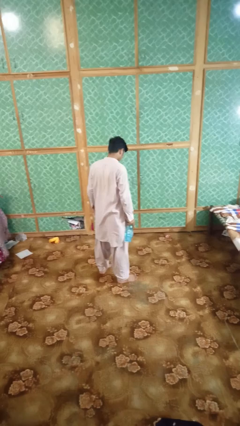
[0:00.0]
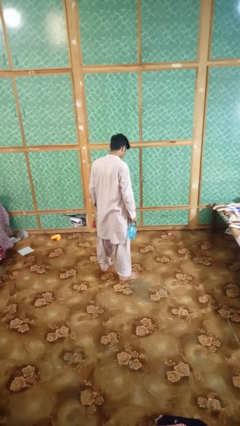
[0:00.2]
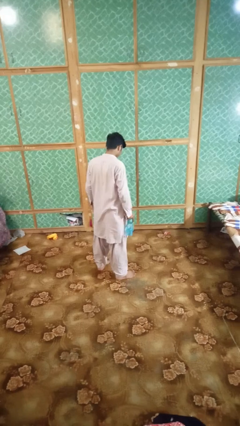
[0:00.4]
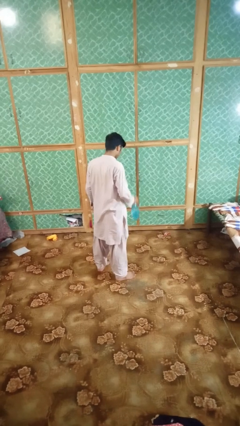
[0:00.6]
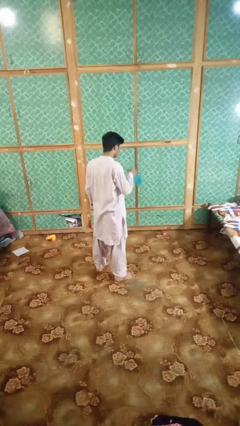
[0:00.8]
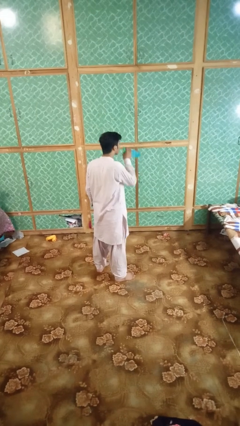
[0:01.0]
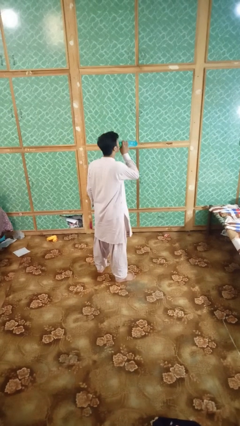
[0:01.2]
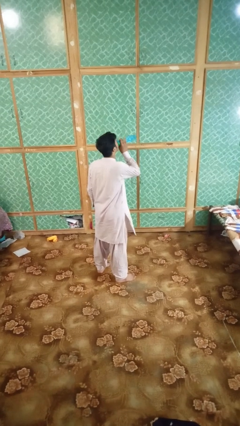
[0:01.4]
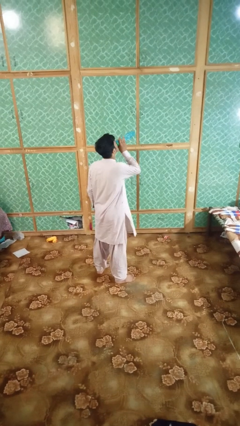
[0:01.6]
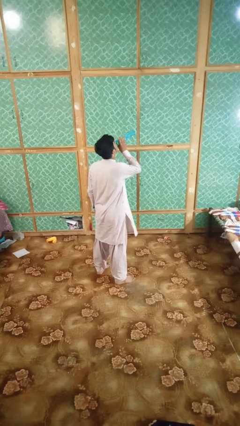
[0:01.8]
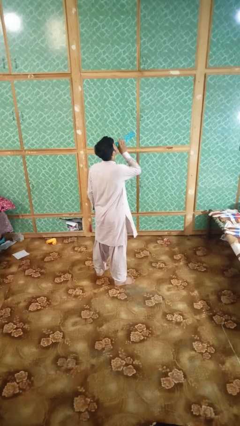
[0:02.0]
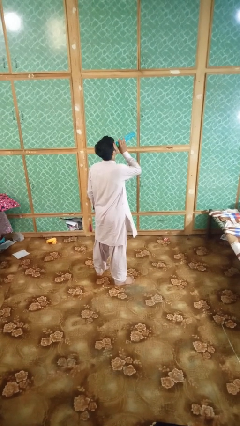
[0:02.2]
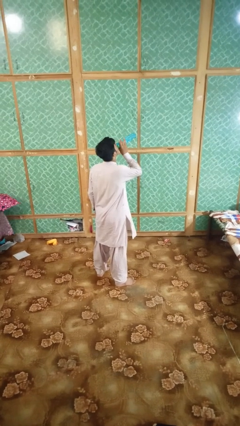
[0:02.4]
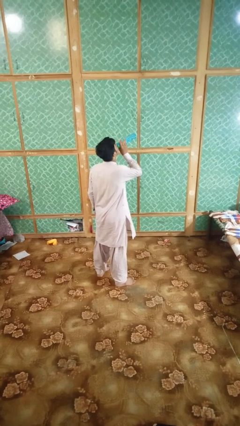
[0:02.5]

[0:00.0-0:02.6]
person drinks from bottle

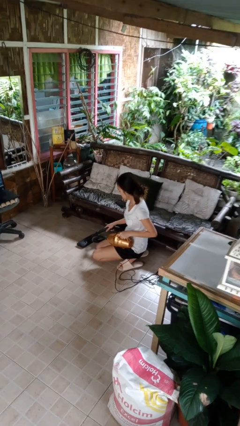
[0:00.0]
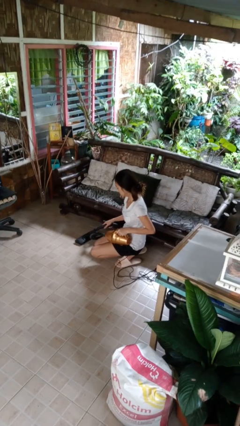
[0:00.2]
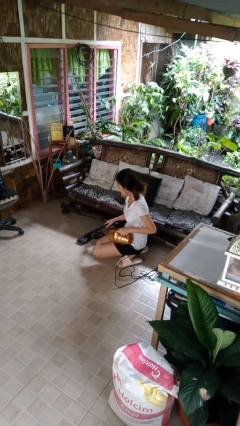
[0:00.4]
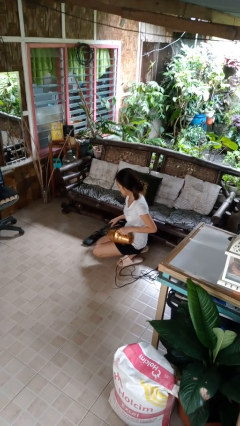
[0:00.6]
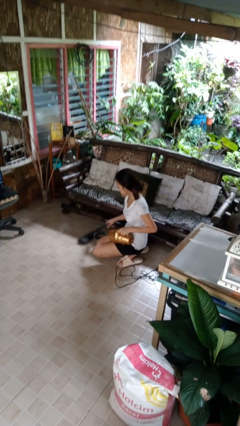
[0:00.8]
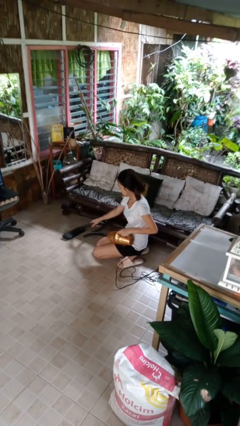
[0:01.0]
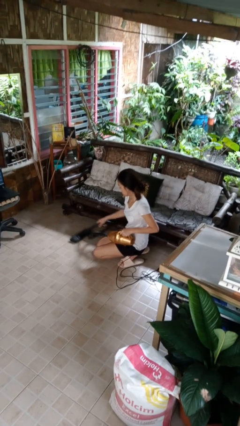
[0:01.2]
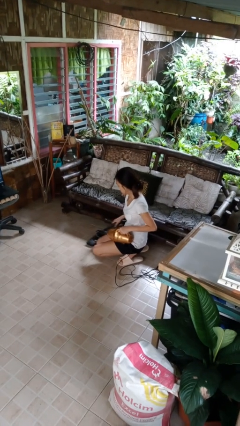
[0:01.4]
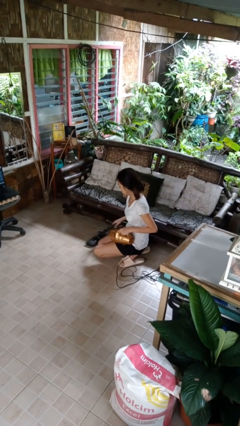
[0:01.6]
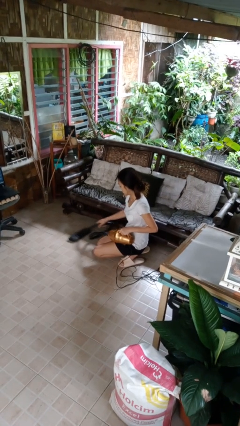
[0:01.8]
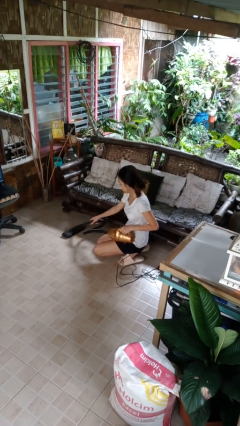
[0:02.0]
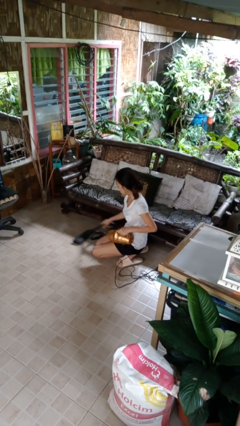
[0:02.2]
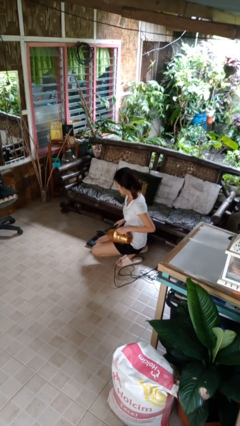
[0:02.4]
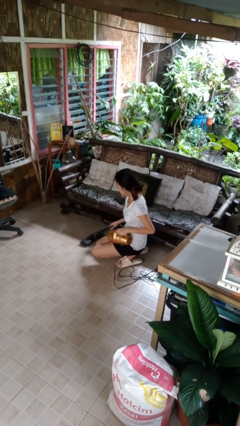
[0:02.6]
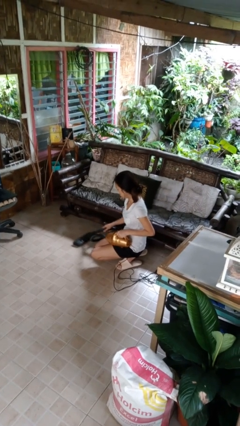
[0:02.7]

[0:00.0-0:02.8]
person vacuums carpet

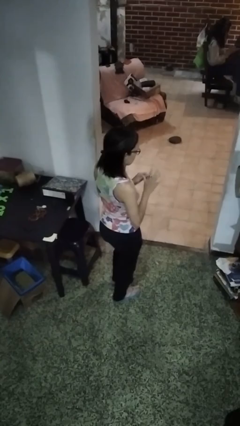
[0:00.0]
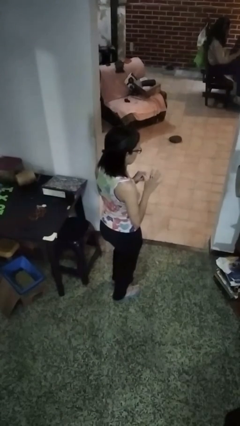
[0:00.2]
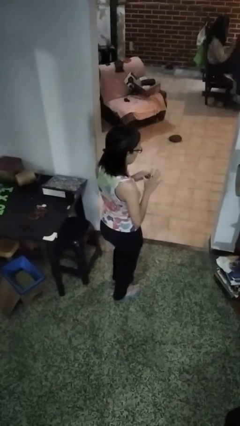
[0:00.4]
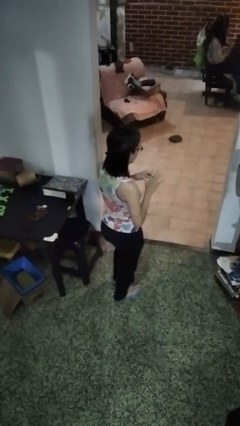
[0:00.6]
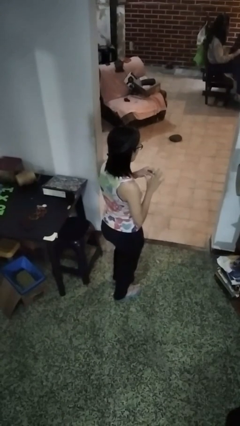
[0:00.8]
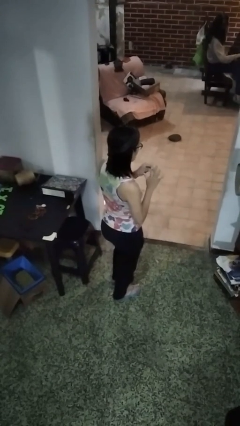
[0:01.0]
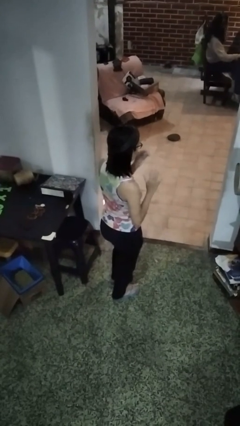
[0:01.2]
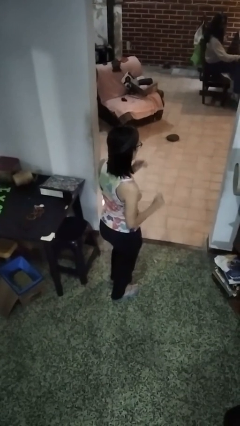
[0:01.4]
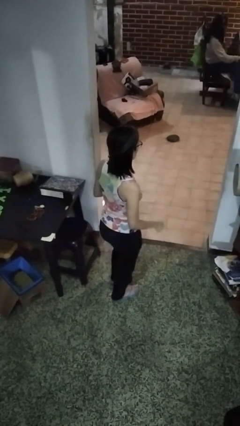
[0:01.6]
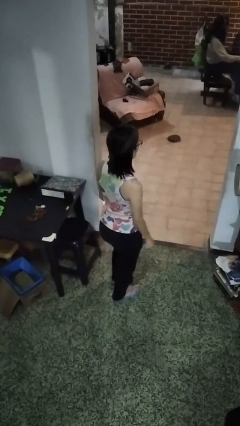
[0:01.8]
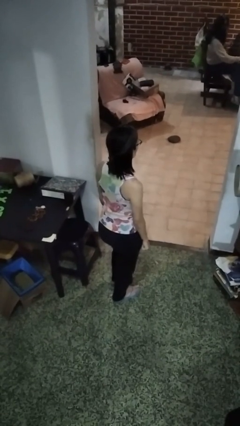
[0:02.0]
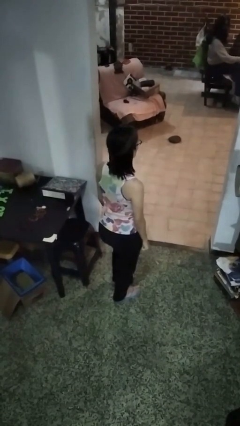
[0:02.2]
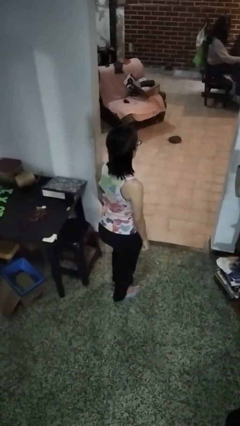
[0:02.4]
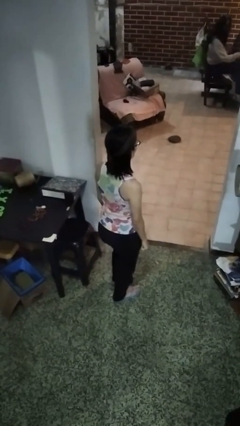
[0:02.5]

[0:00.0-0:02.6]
person takes off ring

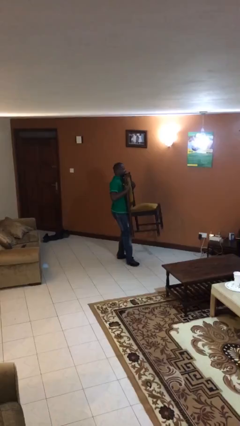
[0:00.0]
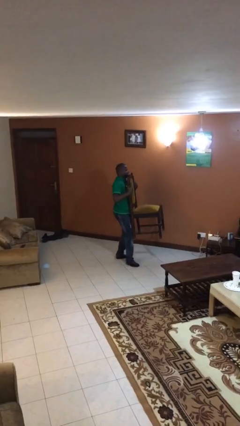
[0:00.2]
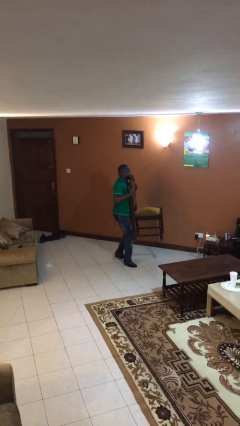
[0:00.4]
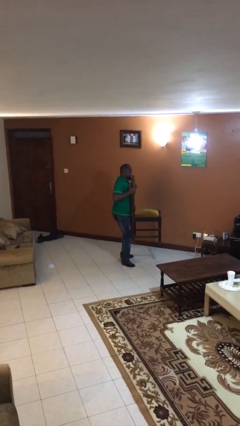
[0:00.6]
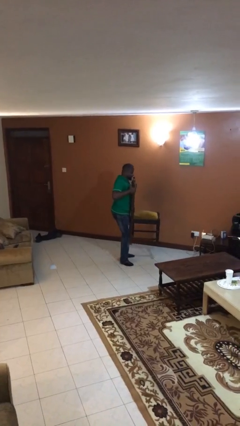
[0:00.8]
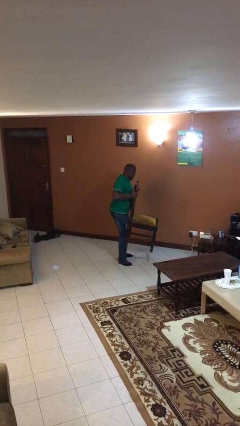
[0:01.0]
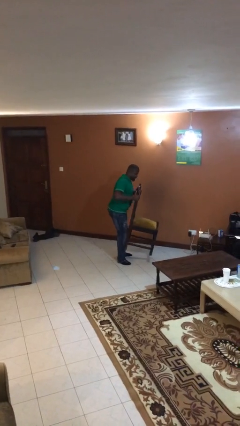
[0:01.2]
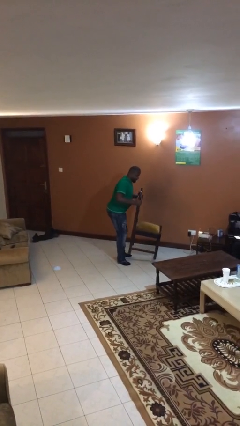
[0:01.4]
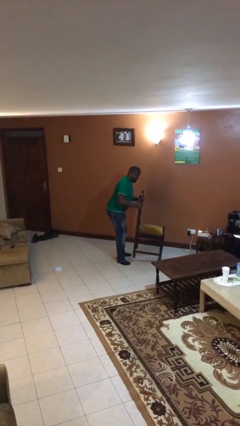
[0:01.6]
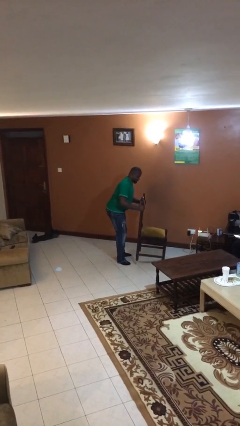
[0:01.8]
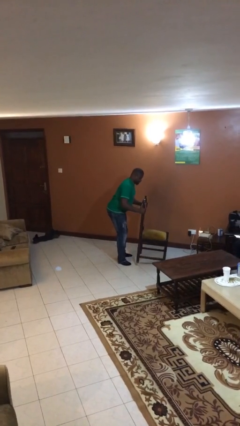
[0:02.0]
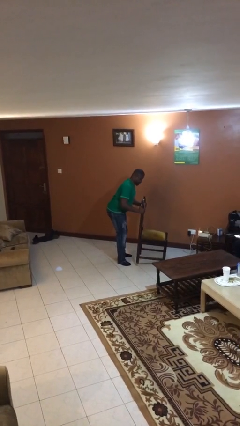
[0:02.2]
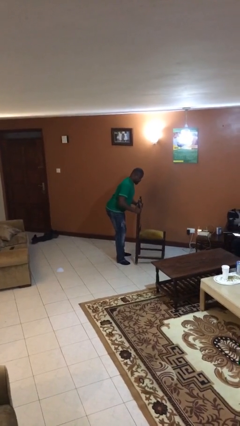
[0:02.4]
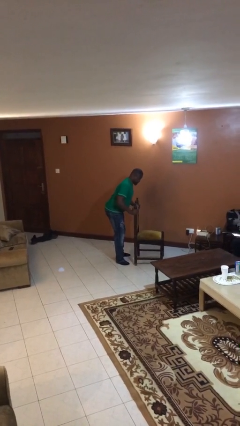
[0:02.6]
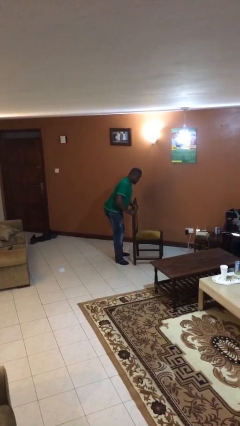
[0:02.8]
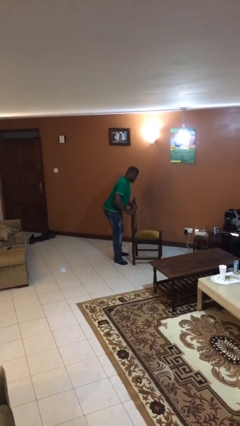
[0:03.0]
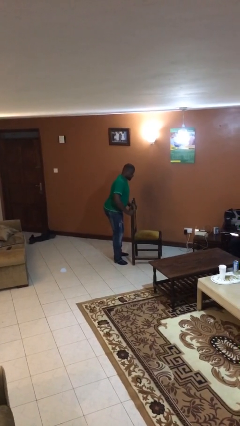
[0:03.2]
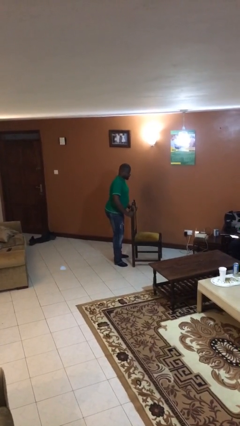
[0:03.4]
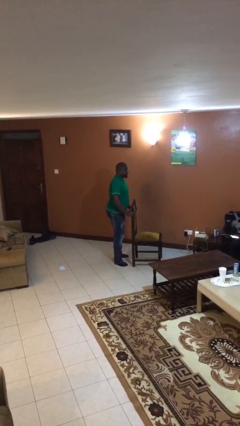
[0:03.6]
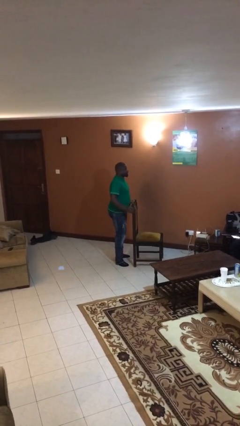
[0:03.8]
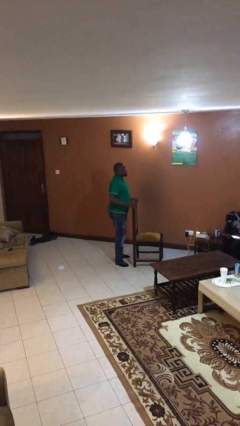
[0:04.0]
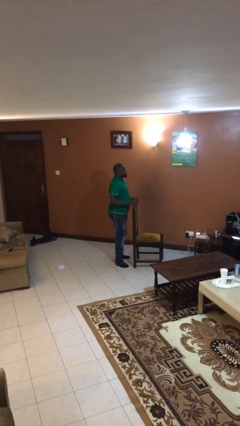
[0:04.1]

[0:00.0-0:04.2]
person puts down object on floor

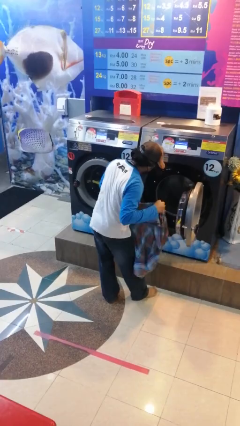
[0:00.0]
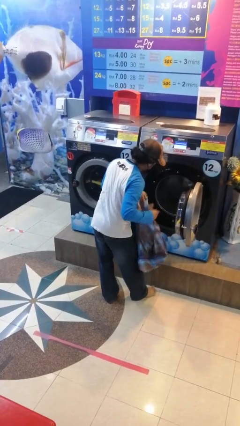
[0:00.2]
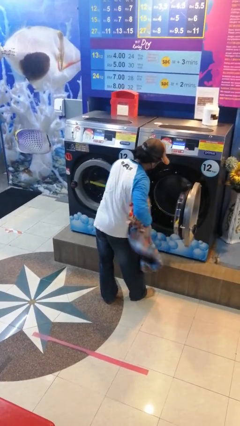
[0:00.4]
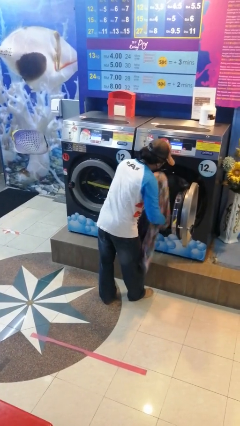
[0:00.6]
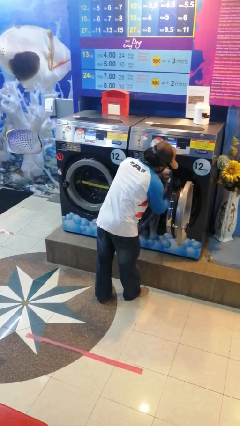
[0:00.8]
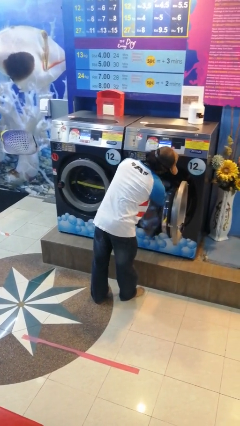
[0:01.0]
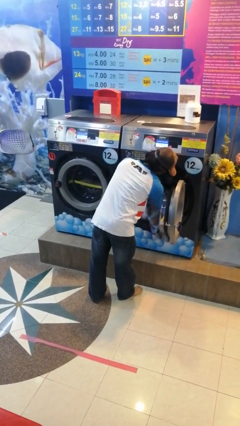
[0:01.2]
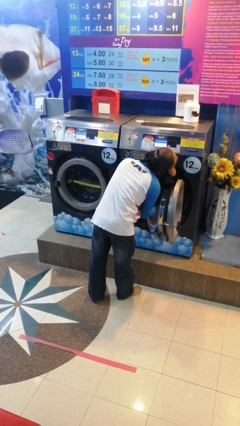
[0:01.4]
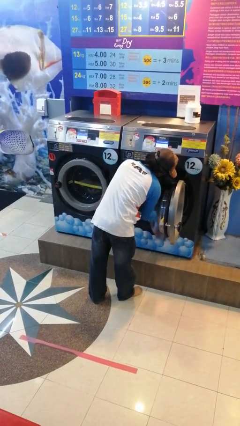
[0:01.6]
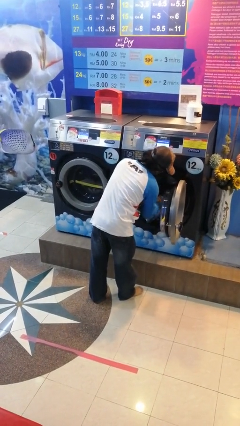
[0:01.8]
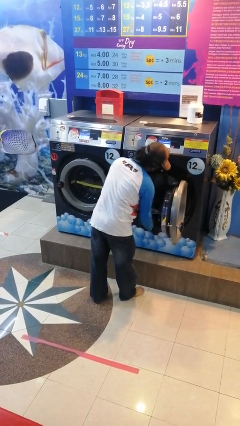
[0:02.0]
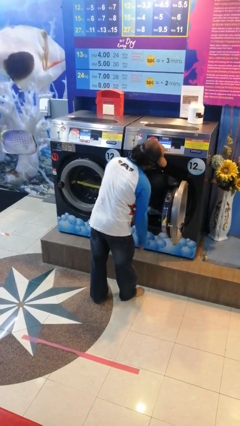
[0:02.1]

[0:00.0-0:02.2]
person loads clotheswasher

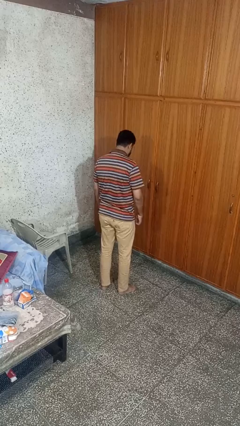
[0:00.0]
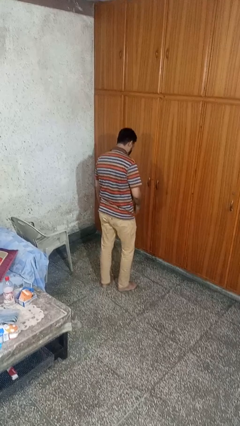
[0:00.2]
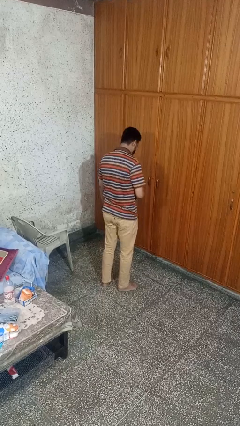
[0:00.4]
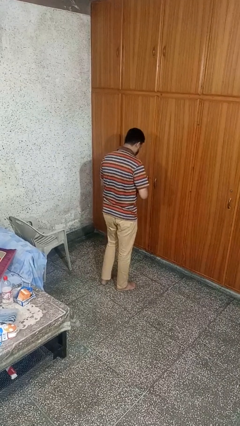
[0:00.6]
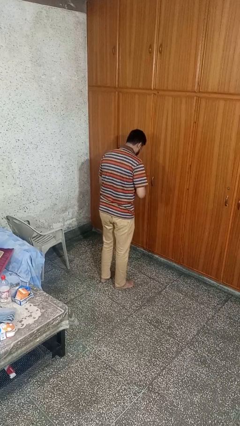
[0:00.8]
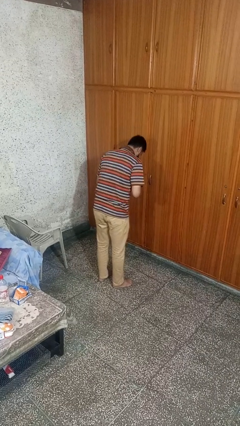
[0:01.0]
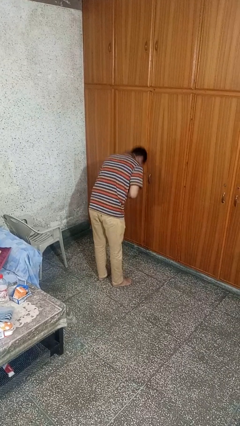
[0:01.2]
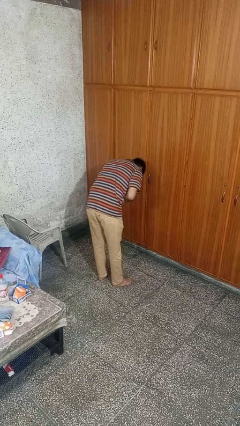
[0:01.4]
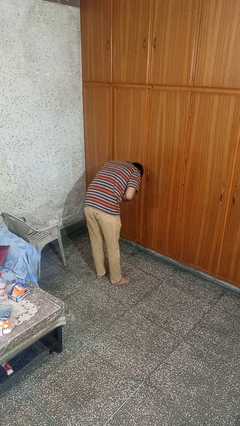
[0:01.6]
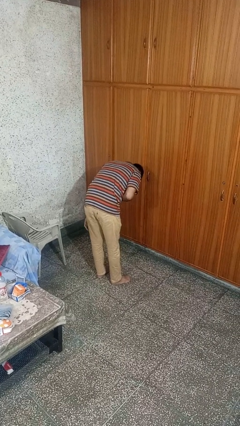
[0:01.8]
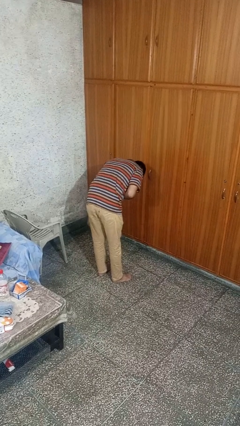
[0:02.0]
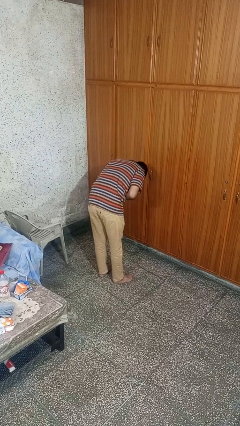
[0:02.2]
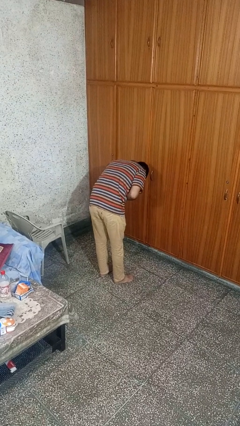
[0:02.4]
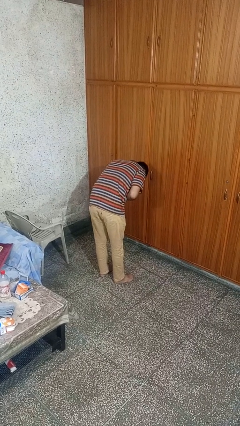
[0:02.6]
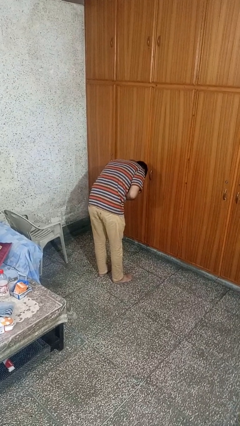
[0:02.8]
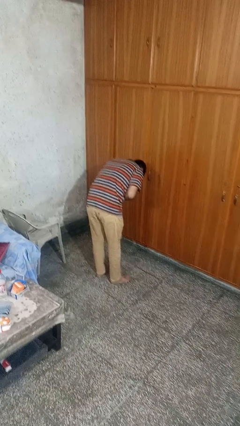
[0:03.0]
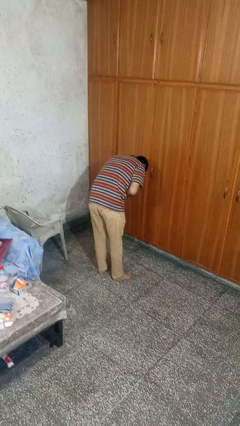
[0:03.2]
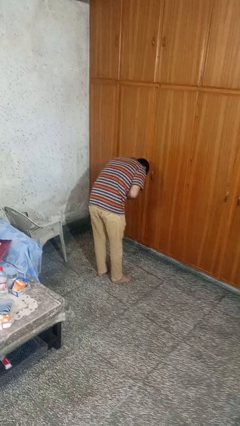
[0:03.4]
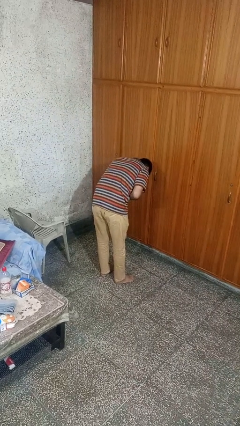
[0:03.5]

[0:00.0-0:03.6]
person bows
